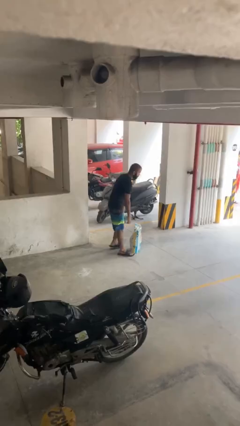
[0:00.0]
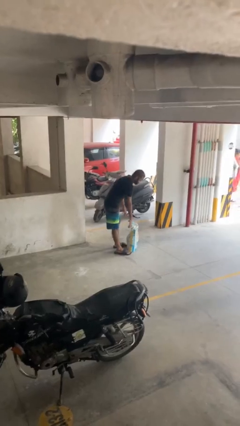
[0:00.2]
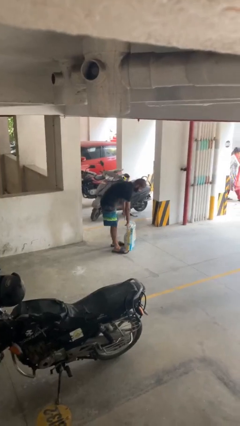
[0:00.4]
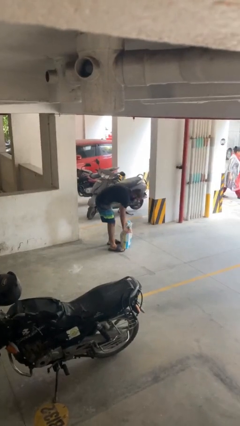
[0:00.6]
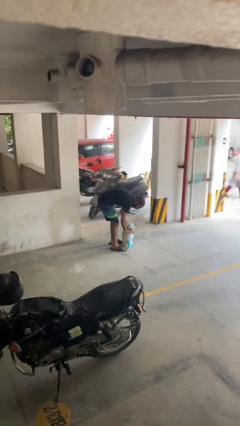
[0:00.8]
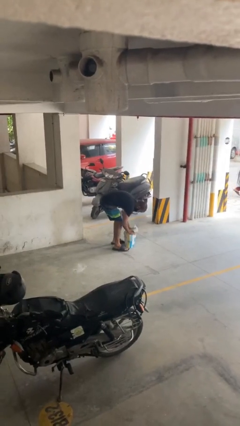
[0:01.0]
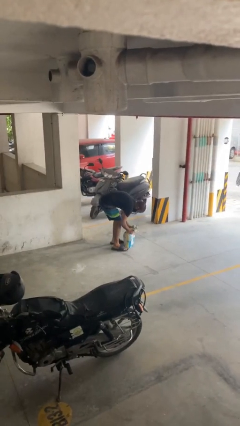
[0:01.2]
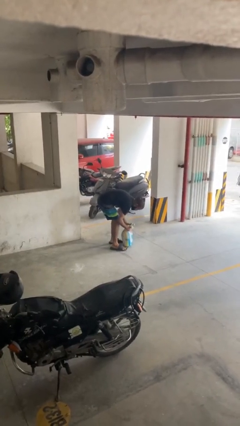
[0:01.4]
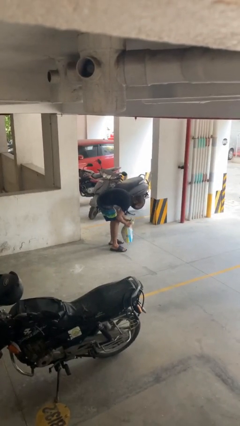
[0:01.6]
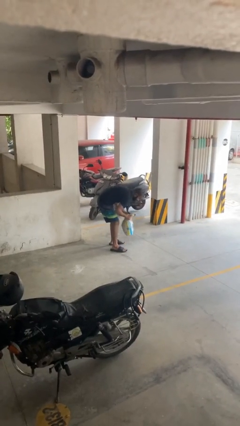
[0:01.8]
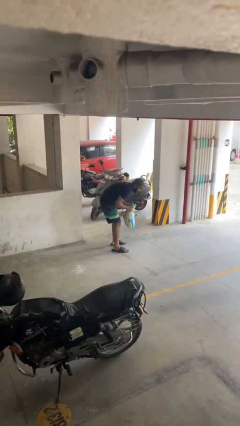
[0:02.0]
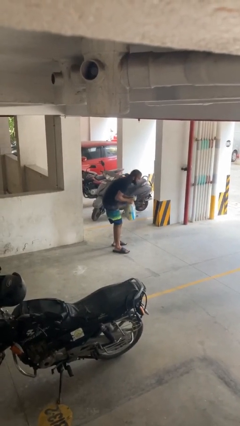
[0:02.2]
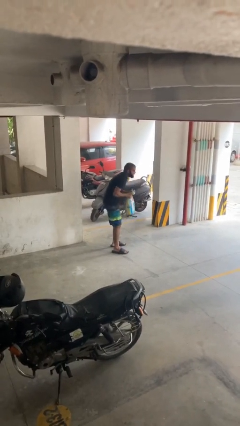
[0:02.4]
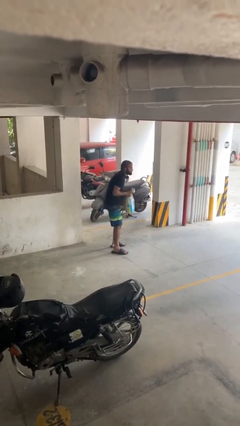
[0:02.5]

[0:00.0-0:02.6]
person picks up object from floor

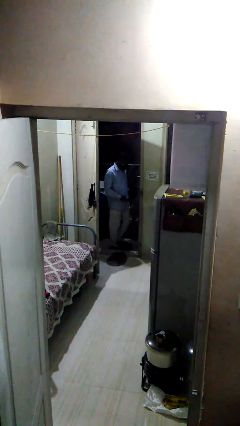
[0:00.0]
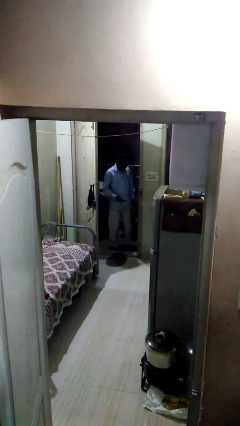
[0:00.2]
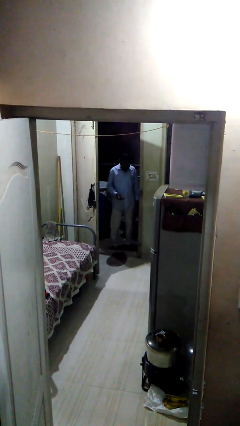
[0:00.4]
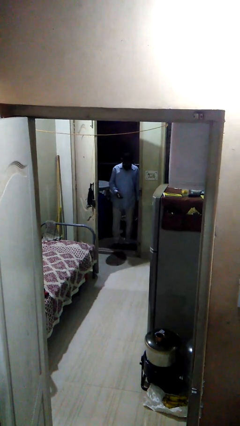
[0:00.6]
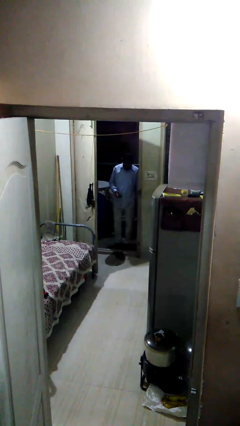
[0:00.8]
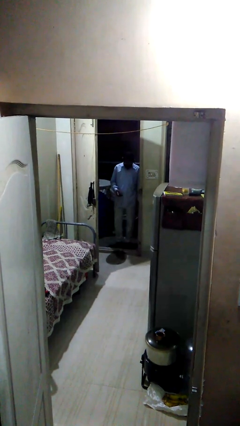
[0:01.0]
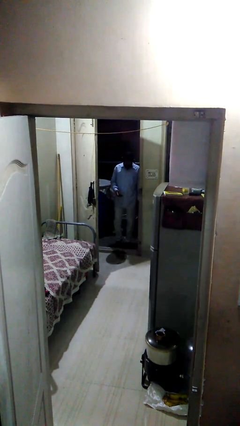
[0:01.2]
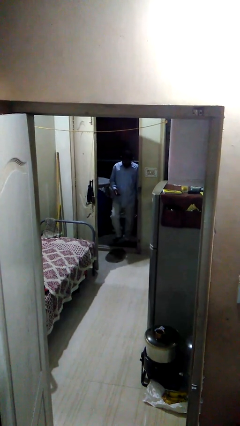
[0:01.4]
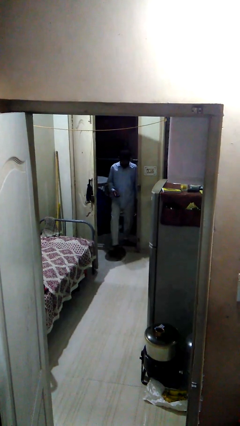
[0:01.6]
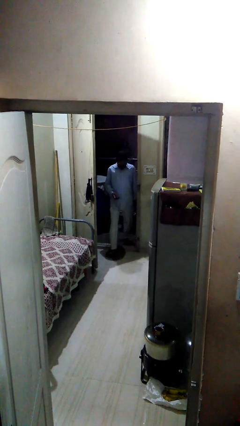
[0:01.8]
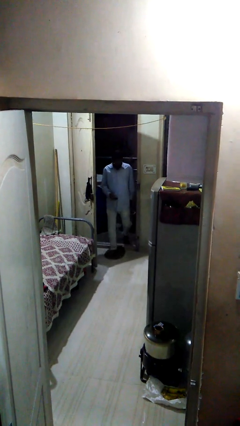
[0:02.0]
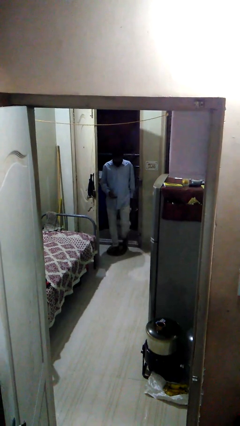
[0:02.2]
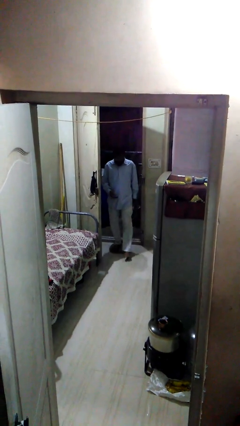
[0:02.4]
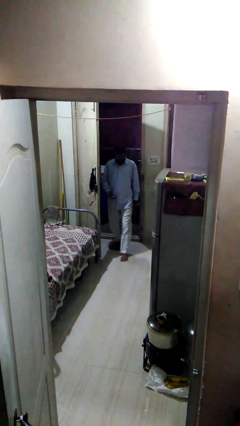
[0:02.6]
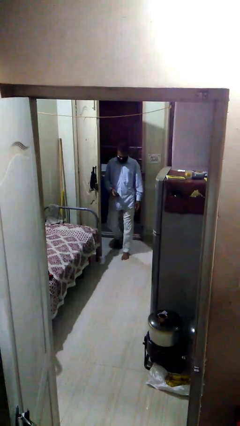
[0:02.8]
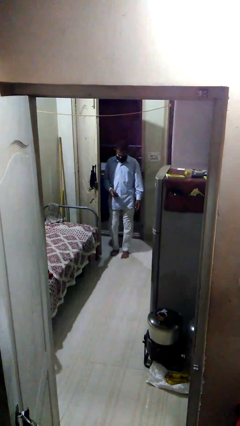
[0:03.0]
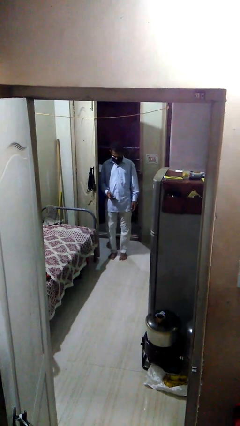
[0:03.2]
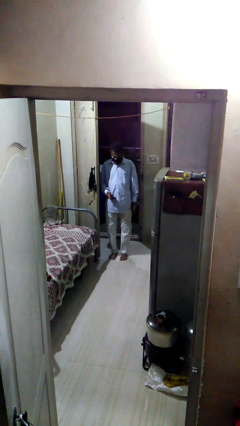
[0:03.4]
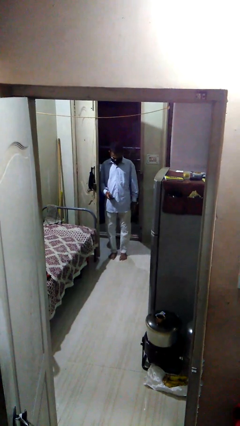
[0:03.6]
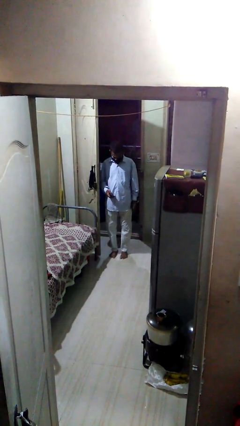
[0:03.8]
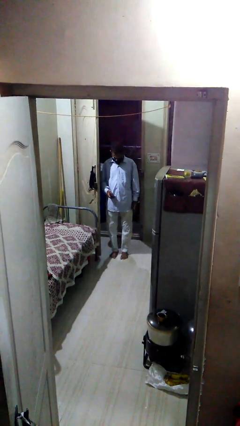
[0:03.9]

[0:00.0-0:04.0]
person enters scene through structure

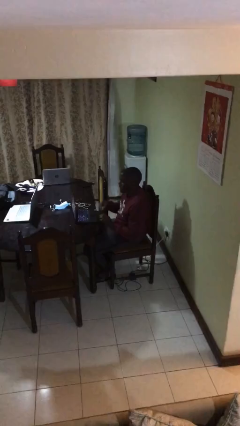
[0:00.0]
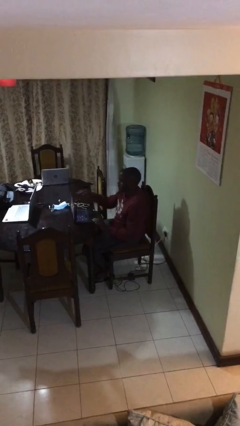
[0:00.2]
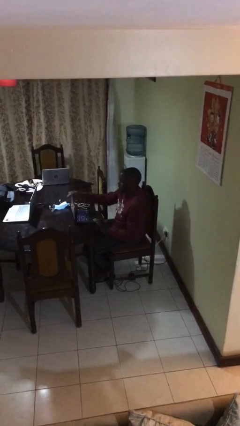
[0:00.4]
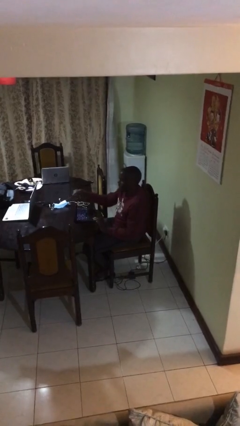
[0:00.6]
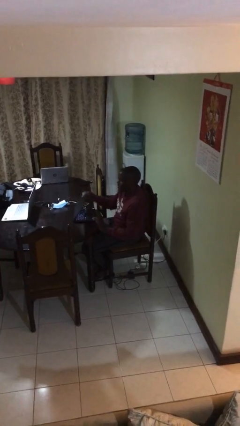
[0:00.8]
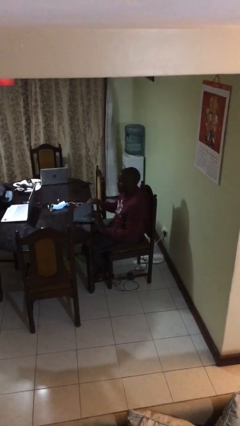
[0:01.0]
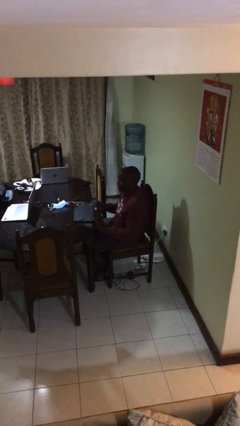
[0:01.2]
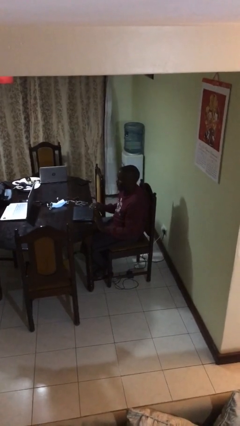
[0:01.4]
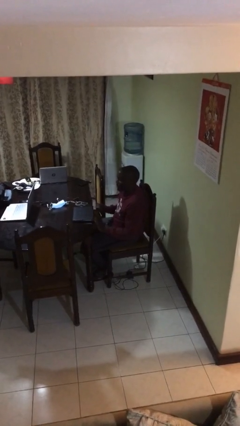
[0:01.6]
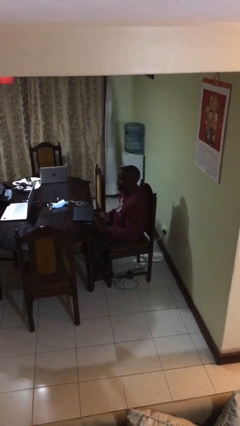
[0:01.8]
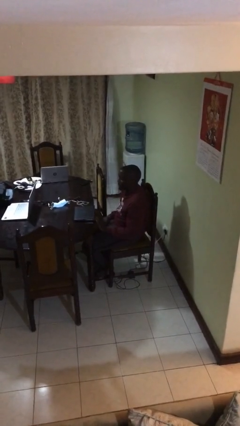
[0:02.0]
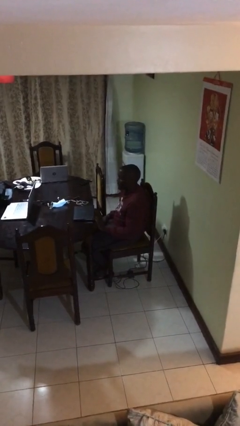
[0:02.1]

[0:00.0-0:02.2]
person closes laptop

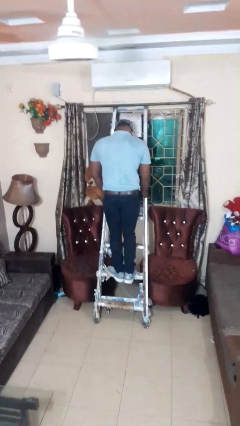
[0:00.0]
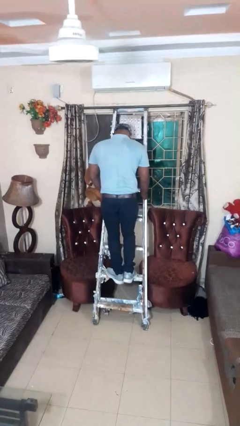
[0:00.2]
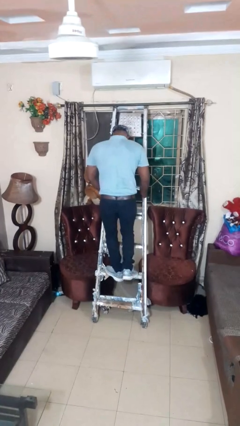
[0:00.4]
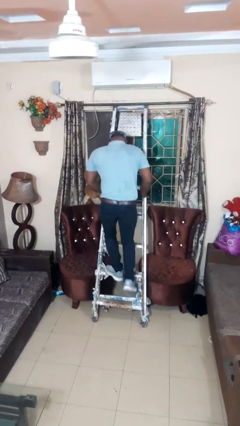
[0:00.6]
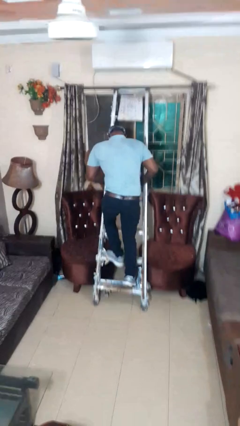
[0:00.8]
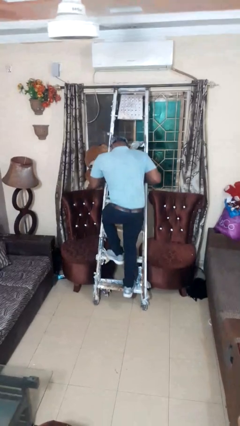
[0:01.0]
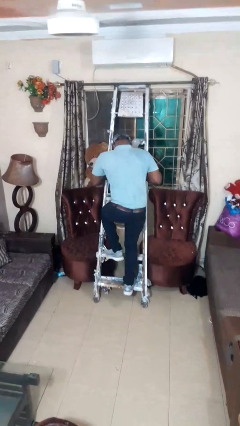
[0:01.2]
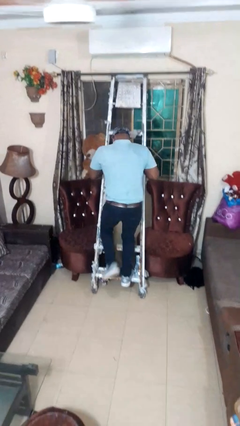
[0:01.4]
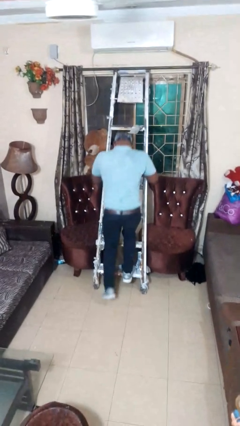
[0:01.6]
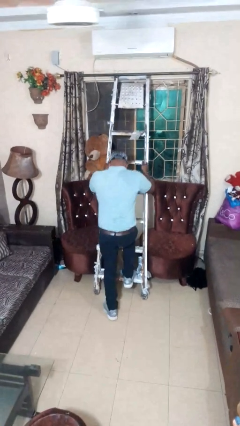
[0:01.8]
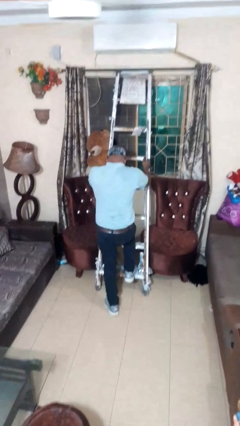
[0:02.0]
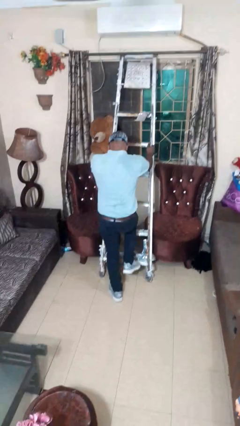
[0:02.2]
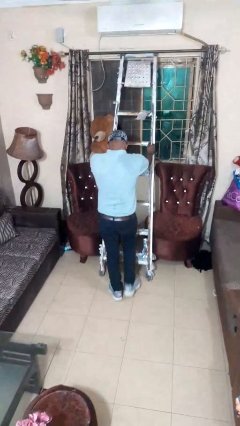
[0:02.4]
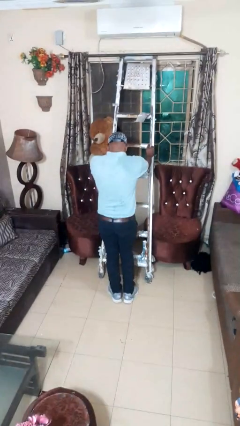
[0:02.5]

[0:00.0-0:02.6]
person climbs down ladder

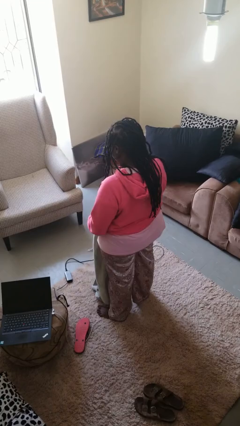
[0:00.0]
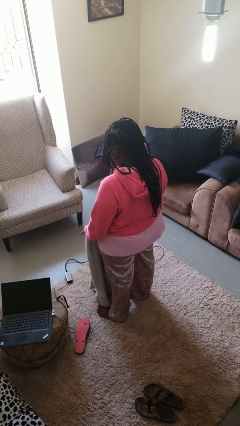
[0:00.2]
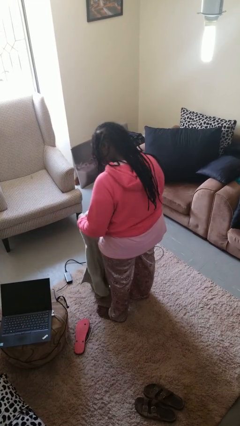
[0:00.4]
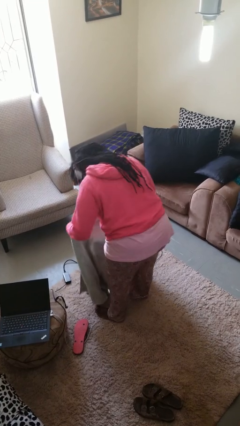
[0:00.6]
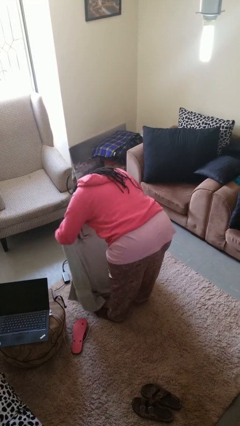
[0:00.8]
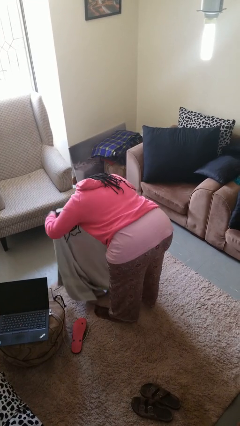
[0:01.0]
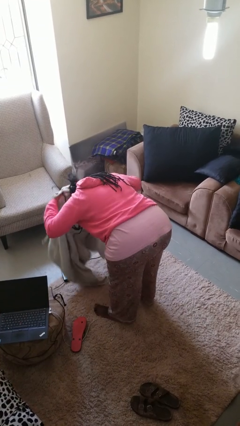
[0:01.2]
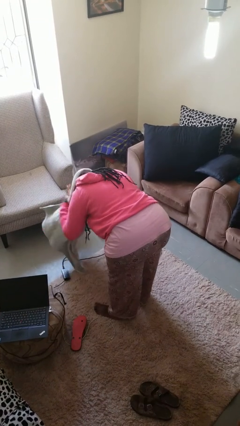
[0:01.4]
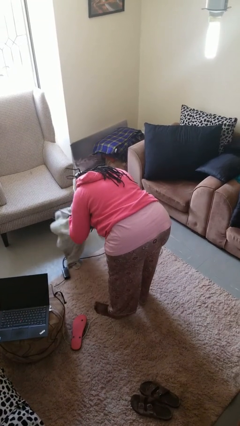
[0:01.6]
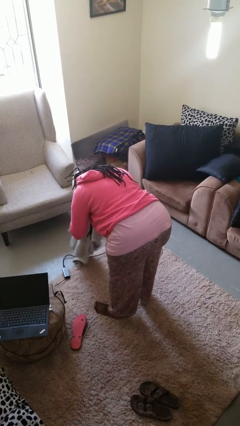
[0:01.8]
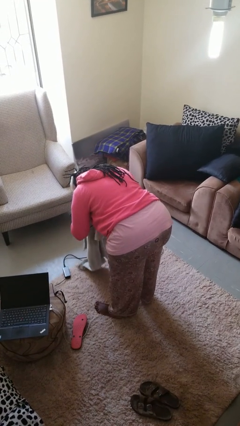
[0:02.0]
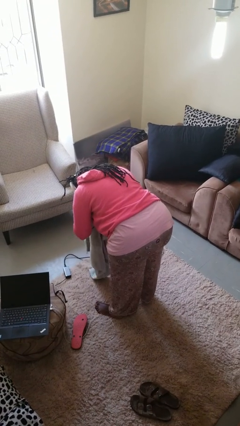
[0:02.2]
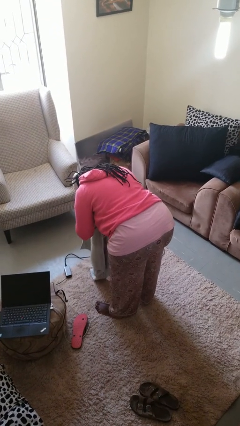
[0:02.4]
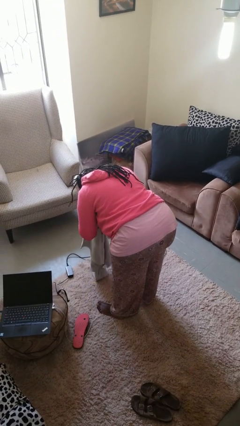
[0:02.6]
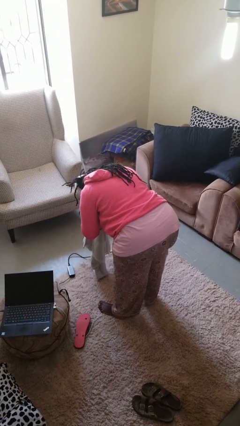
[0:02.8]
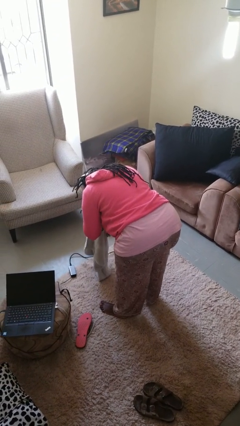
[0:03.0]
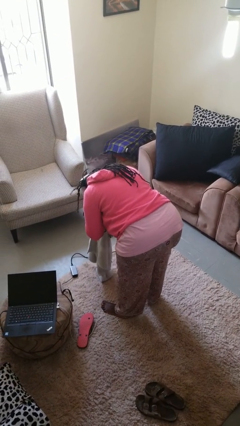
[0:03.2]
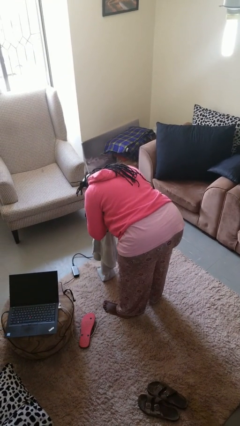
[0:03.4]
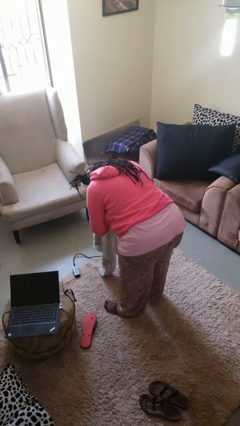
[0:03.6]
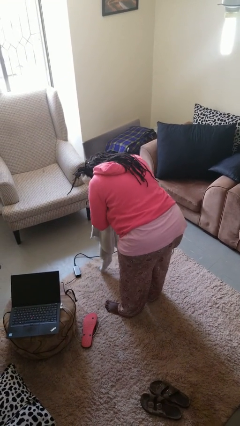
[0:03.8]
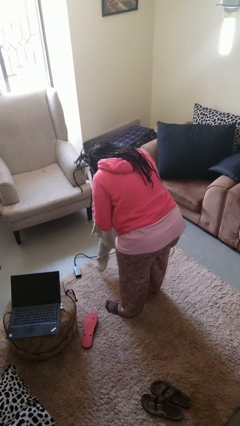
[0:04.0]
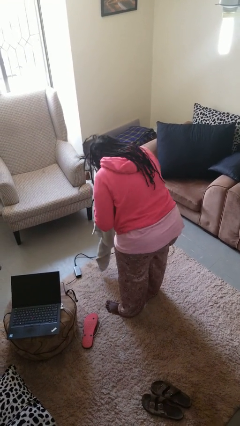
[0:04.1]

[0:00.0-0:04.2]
person dries hair with towel

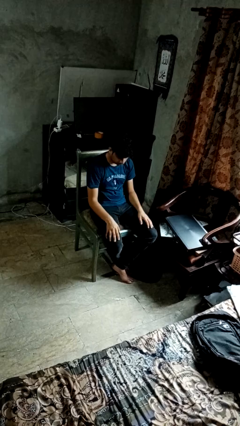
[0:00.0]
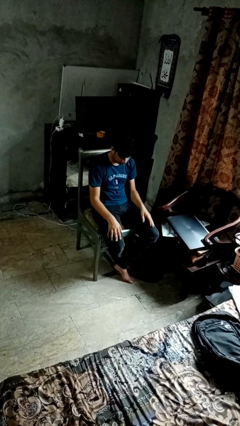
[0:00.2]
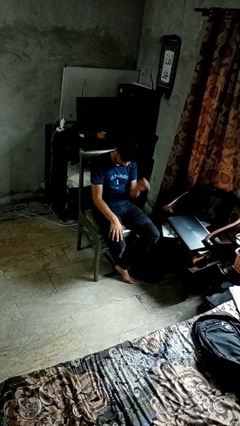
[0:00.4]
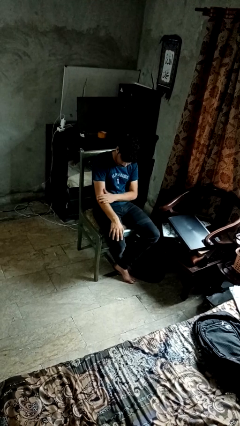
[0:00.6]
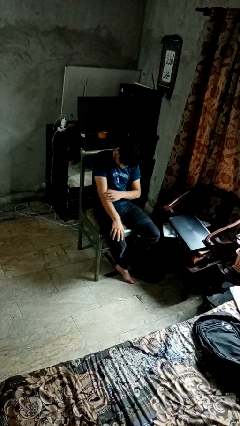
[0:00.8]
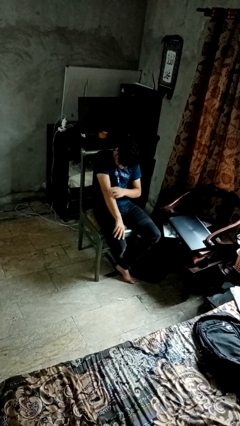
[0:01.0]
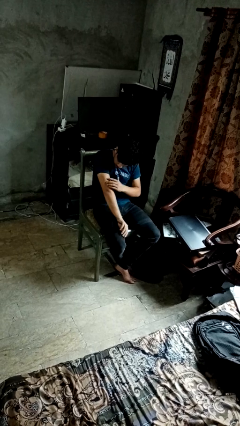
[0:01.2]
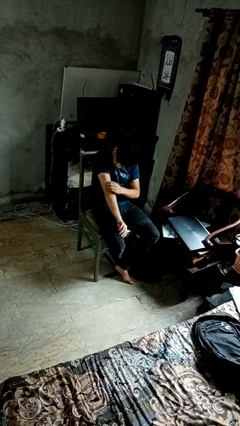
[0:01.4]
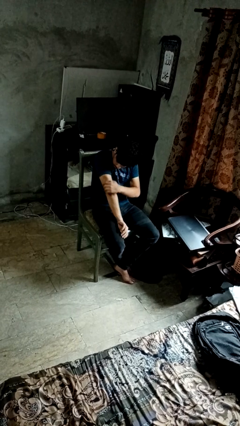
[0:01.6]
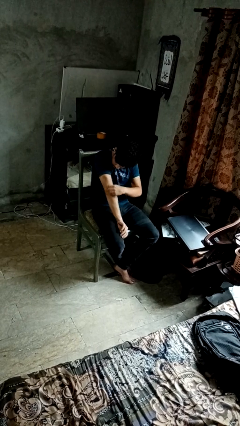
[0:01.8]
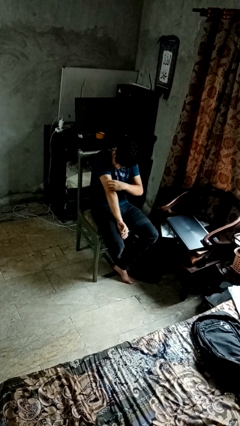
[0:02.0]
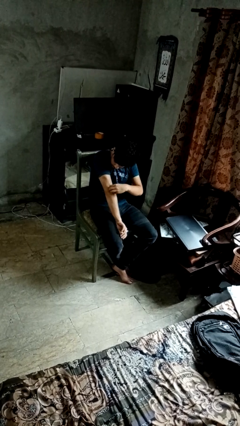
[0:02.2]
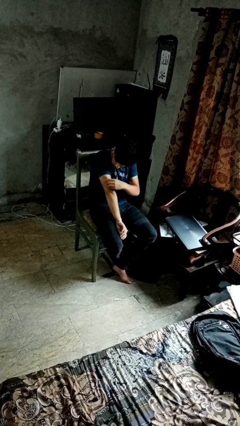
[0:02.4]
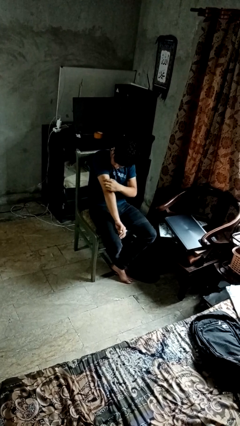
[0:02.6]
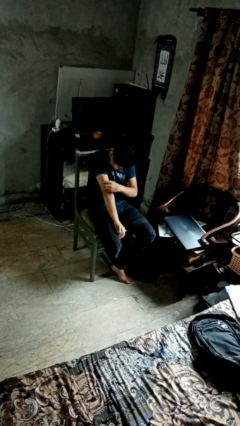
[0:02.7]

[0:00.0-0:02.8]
person swats bug
